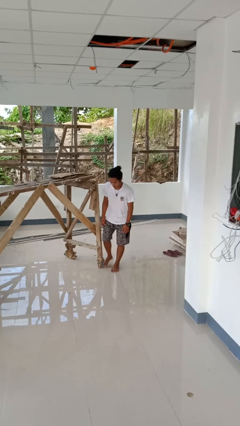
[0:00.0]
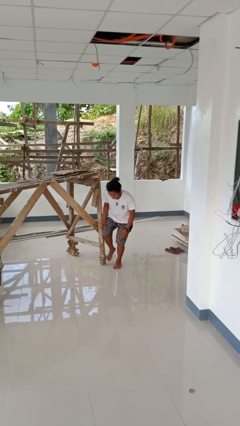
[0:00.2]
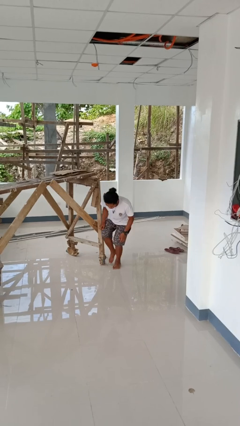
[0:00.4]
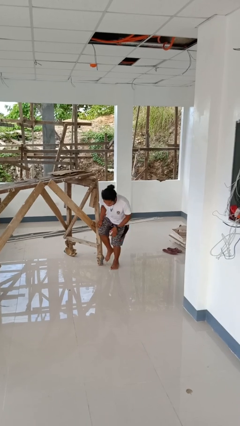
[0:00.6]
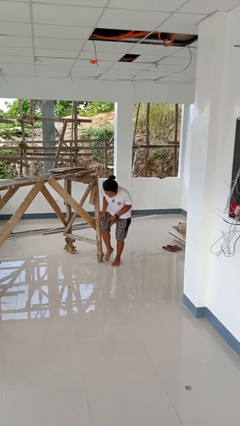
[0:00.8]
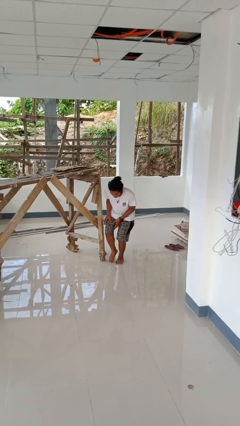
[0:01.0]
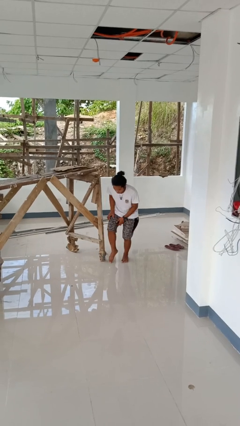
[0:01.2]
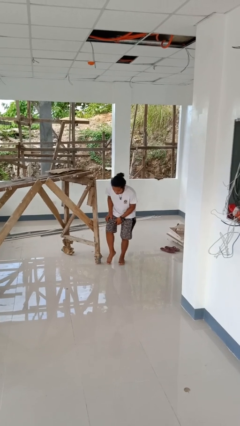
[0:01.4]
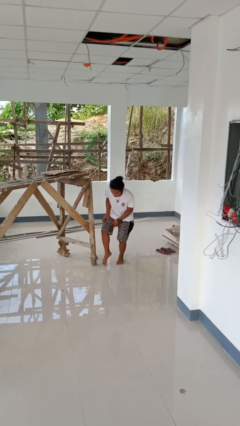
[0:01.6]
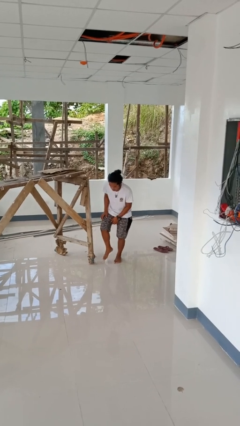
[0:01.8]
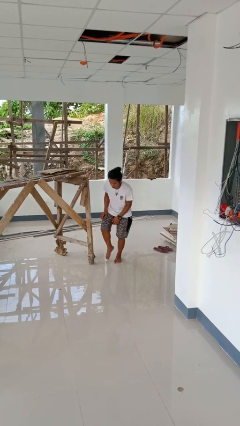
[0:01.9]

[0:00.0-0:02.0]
person stubs toe

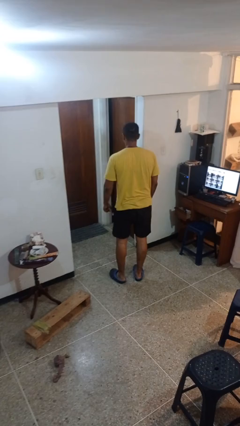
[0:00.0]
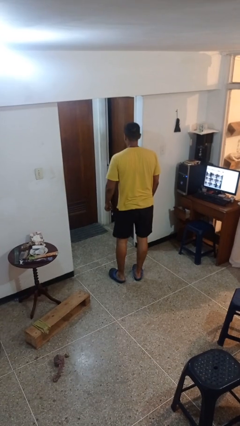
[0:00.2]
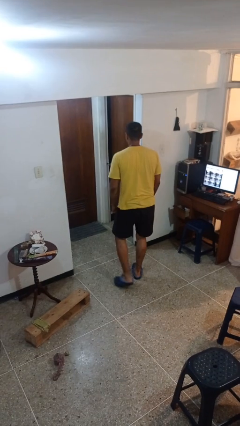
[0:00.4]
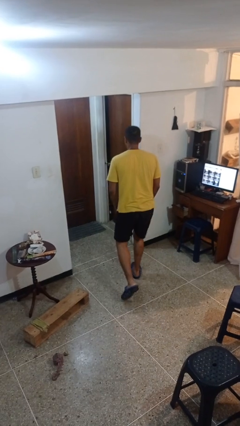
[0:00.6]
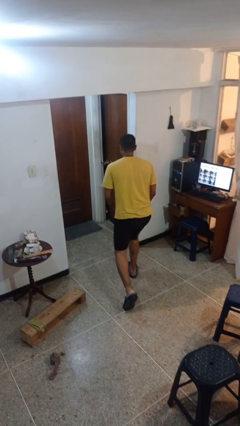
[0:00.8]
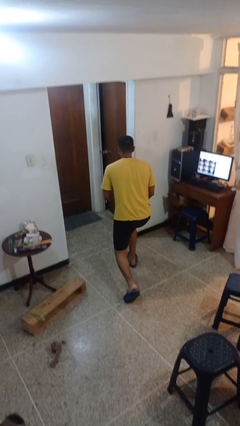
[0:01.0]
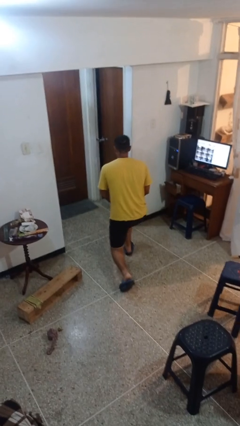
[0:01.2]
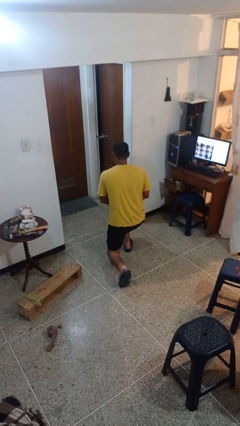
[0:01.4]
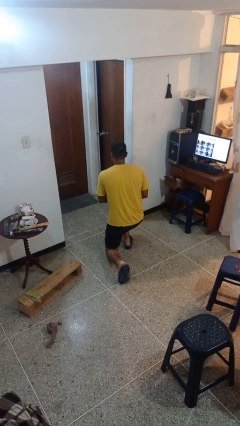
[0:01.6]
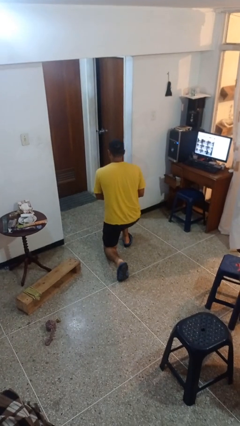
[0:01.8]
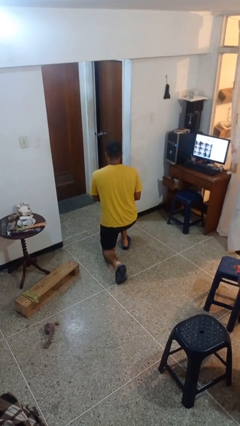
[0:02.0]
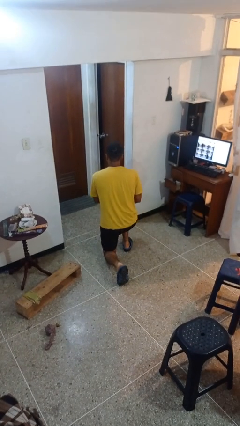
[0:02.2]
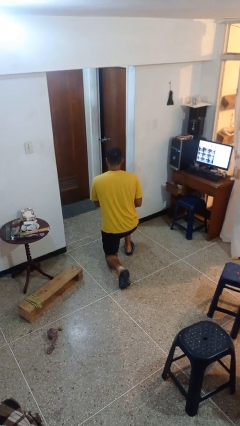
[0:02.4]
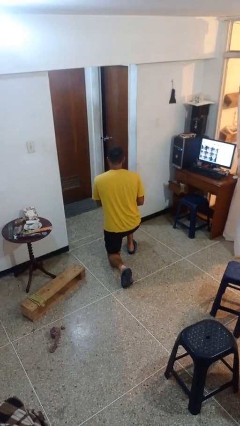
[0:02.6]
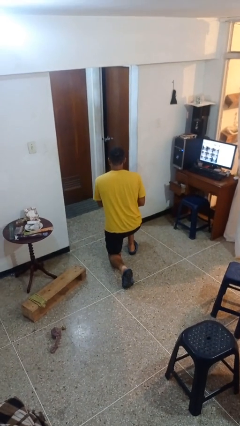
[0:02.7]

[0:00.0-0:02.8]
person kneels

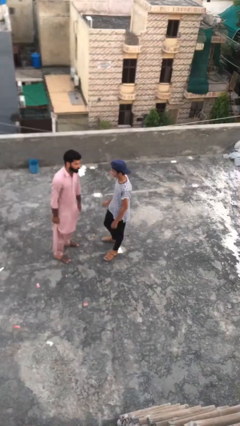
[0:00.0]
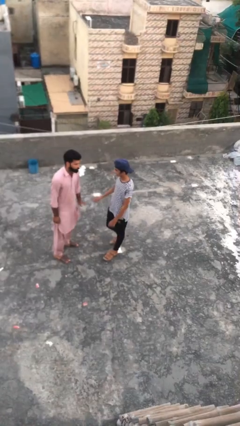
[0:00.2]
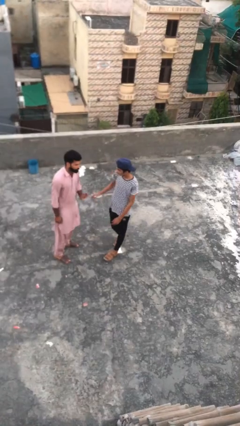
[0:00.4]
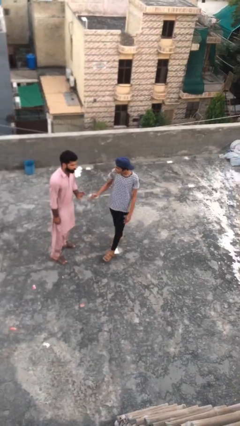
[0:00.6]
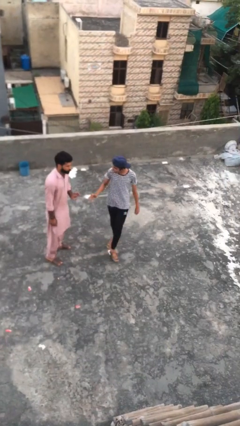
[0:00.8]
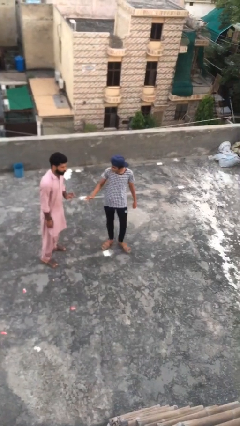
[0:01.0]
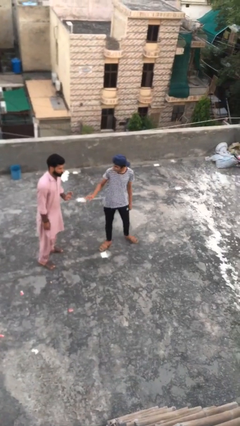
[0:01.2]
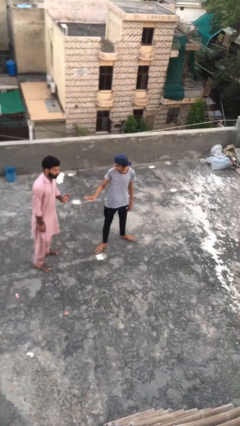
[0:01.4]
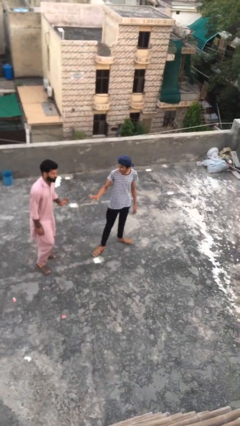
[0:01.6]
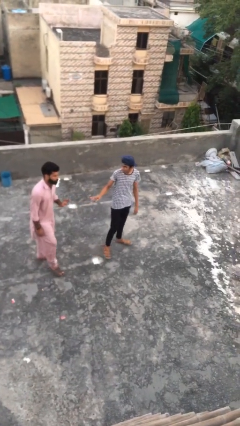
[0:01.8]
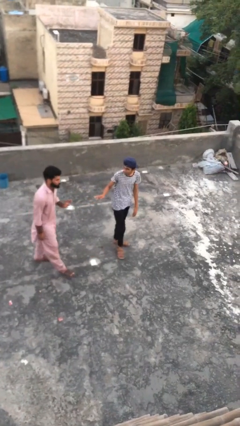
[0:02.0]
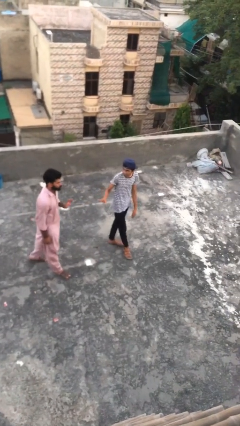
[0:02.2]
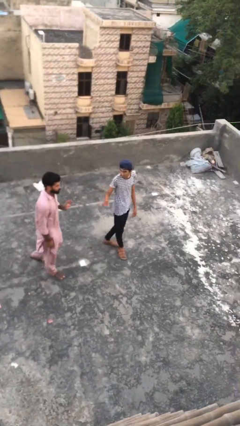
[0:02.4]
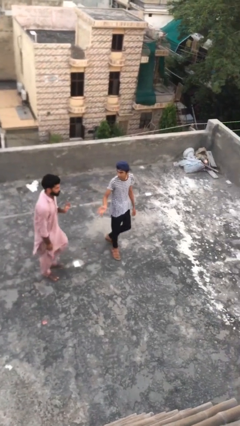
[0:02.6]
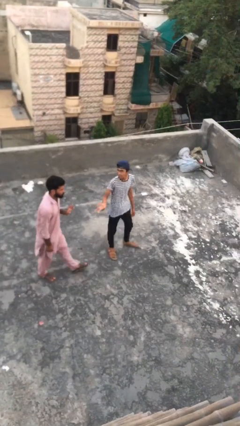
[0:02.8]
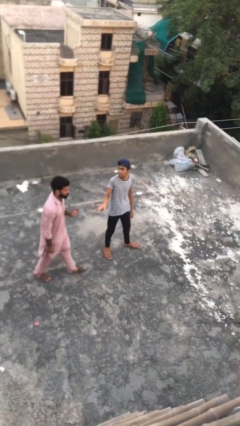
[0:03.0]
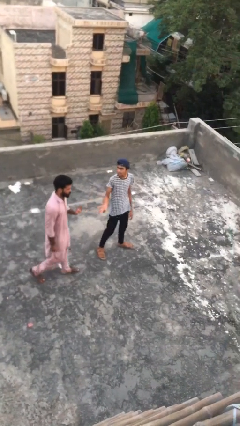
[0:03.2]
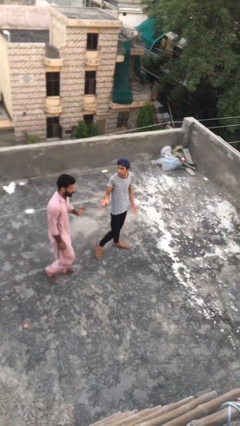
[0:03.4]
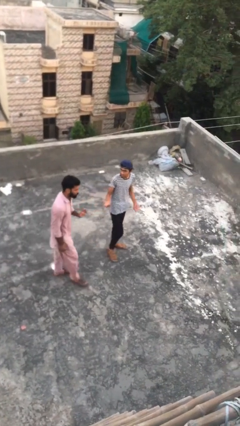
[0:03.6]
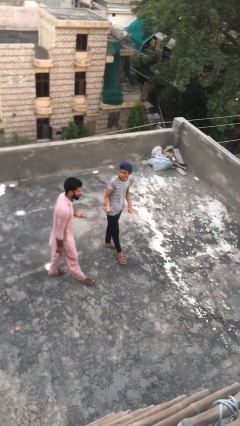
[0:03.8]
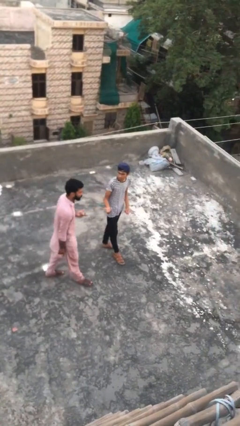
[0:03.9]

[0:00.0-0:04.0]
person talks to person

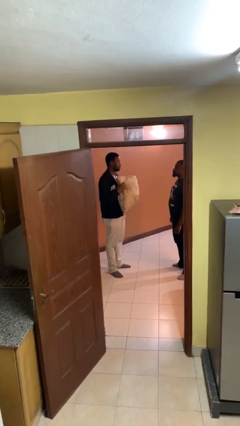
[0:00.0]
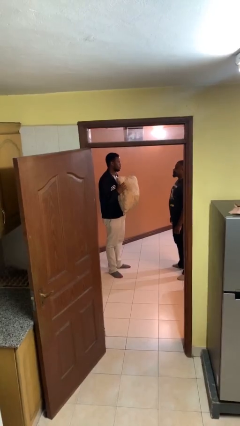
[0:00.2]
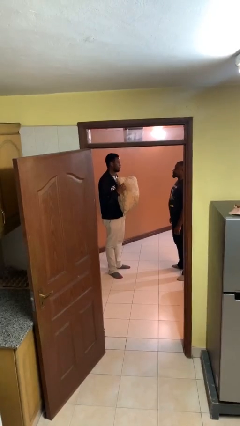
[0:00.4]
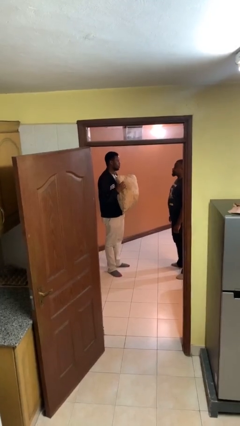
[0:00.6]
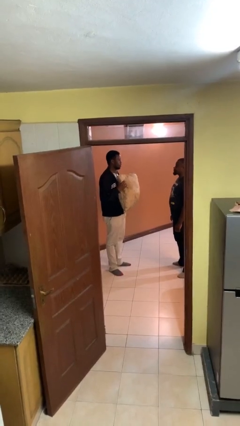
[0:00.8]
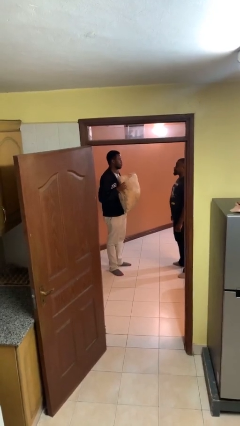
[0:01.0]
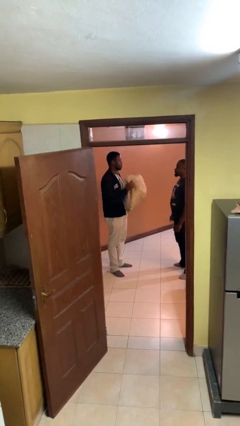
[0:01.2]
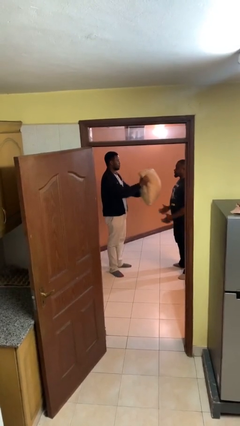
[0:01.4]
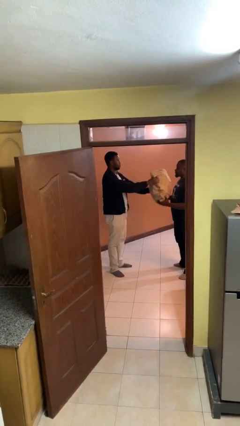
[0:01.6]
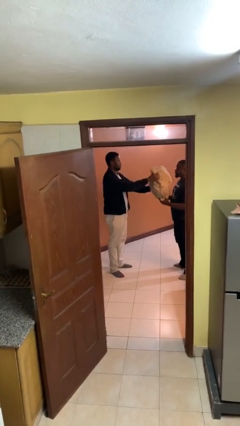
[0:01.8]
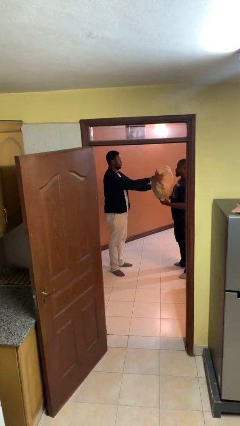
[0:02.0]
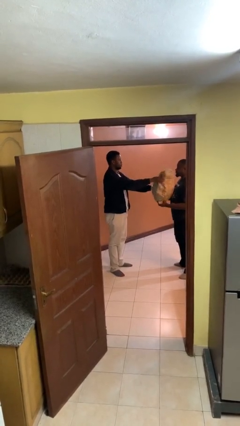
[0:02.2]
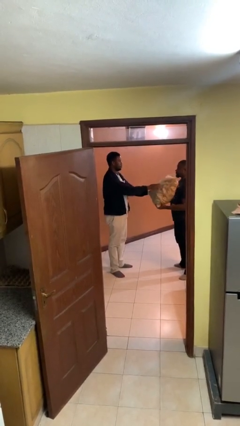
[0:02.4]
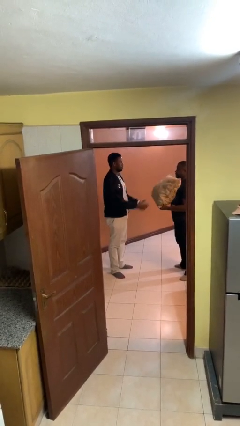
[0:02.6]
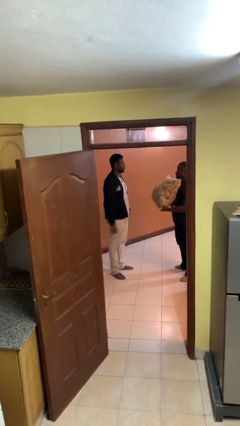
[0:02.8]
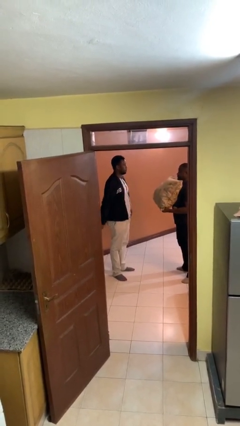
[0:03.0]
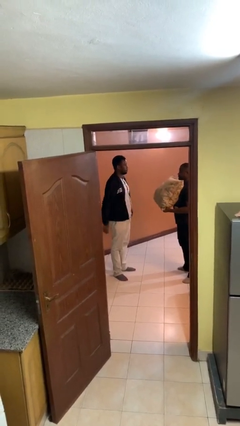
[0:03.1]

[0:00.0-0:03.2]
person transfers object to person

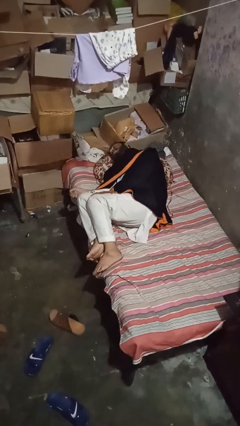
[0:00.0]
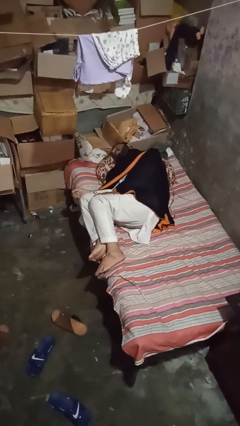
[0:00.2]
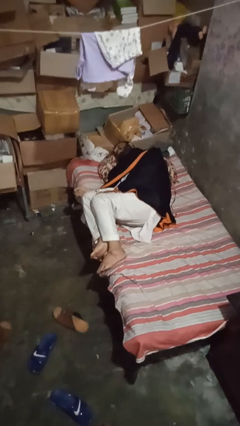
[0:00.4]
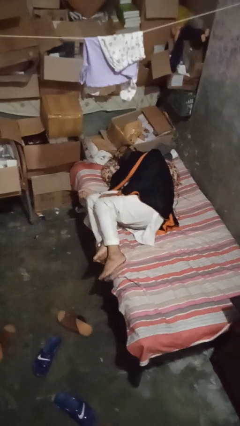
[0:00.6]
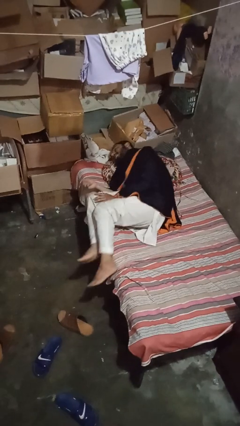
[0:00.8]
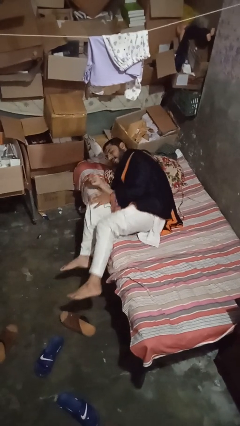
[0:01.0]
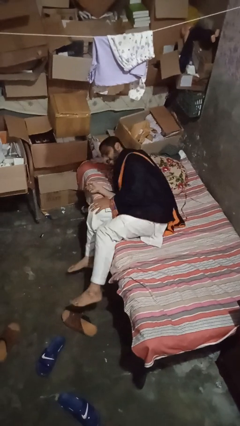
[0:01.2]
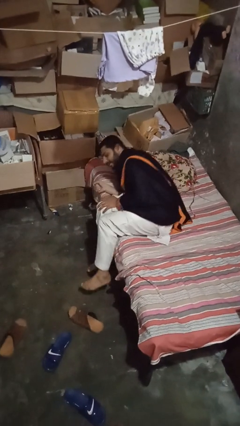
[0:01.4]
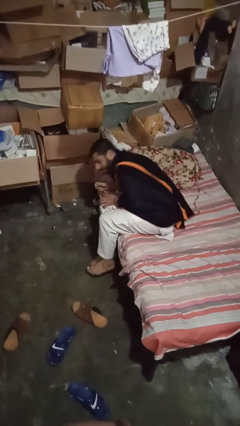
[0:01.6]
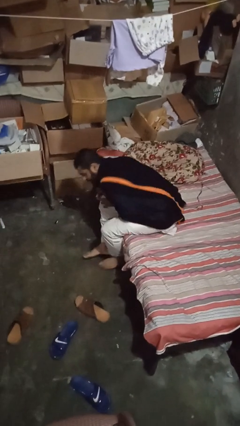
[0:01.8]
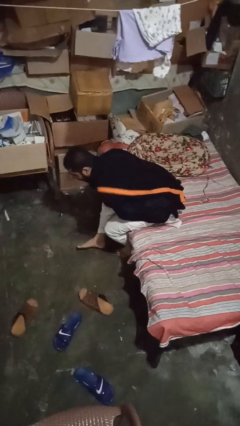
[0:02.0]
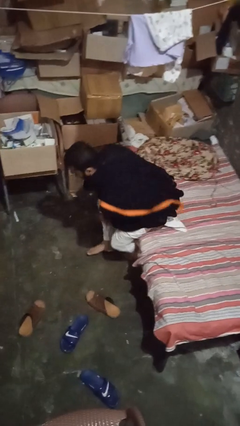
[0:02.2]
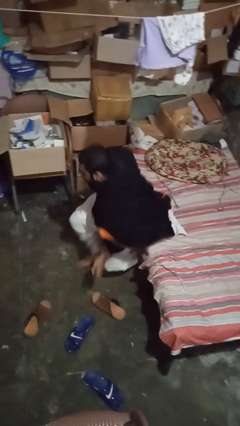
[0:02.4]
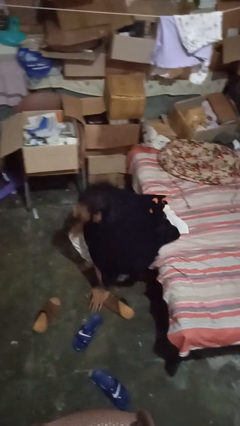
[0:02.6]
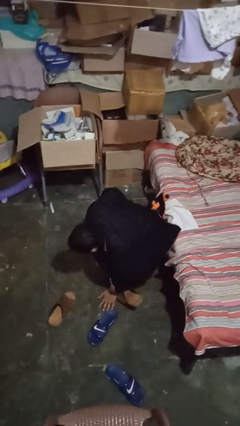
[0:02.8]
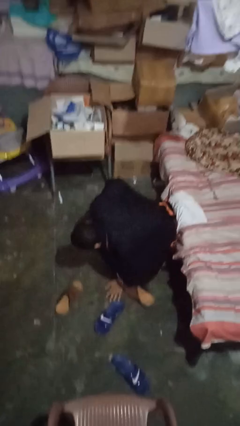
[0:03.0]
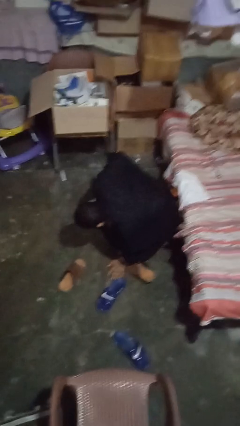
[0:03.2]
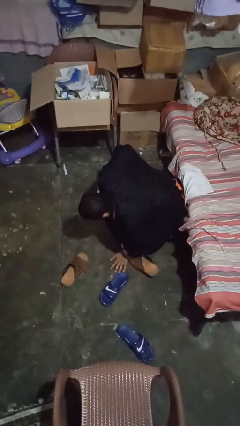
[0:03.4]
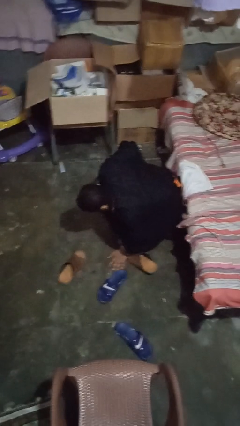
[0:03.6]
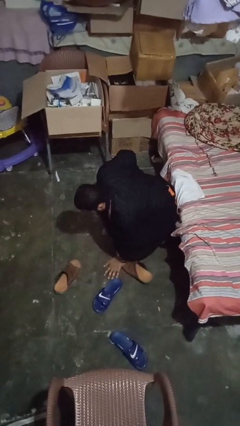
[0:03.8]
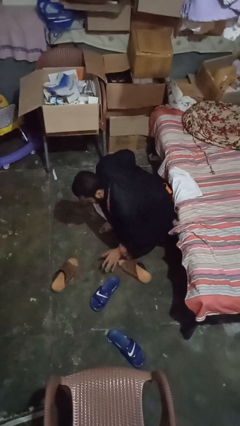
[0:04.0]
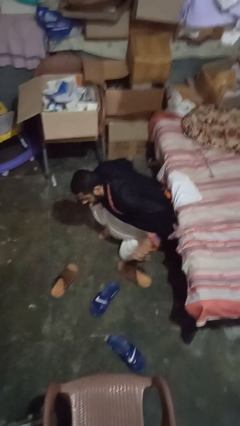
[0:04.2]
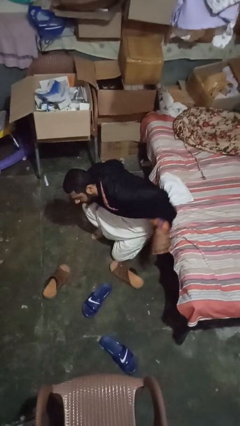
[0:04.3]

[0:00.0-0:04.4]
person falls from bed

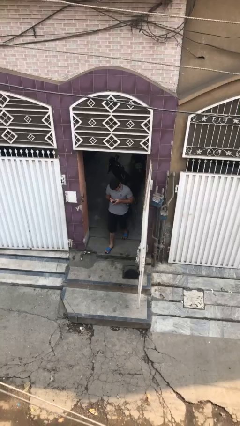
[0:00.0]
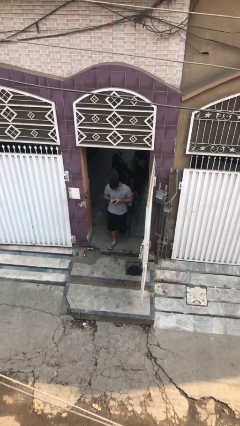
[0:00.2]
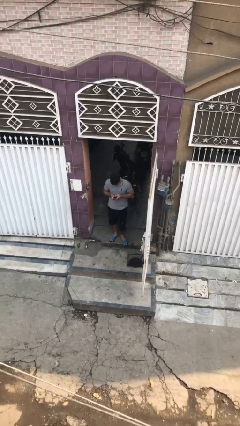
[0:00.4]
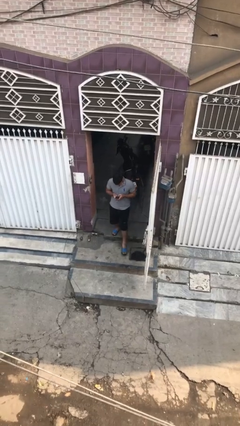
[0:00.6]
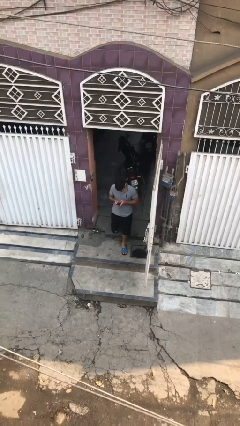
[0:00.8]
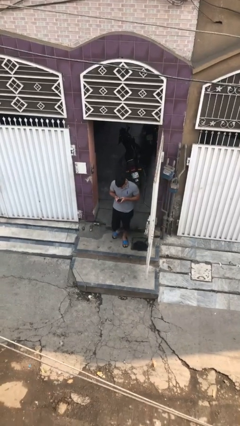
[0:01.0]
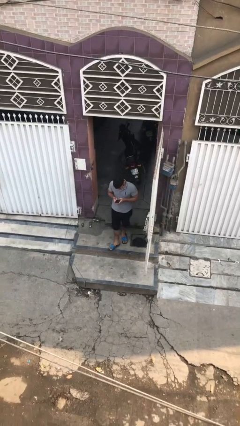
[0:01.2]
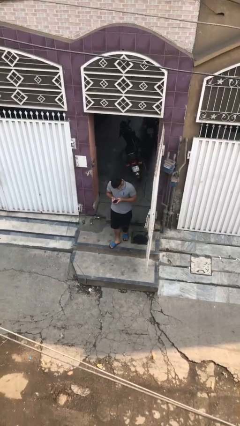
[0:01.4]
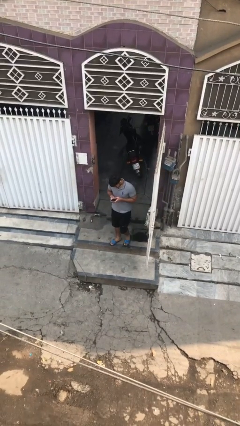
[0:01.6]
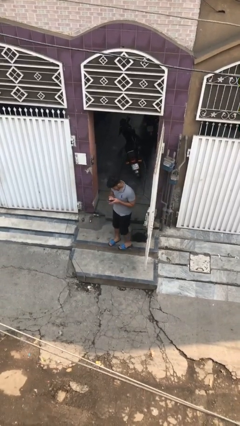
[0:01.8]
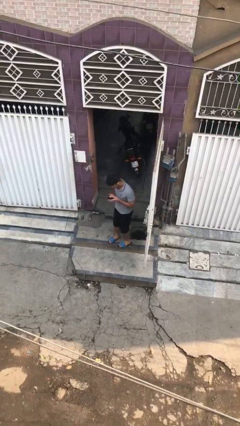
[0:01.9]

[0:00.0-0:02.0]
person enters scene through structure
